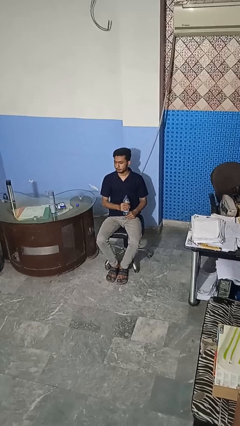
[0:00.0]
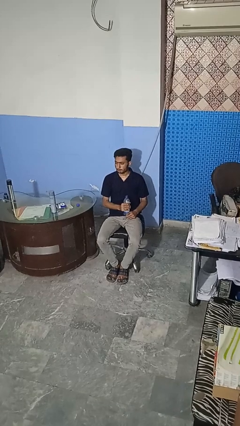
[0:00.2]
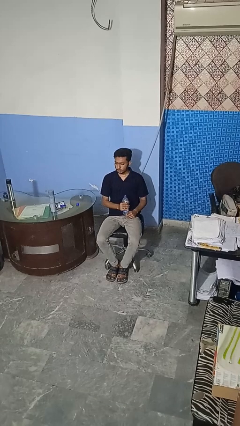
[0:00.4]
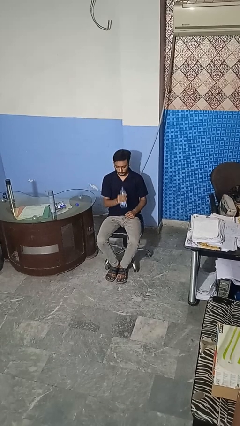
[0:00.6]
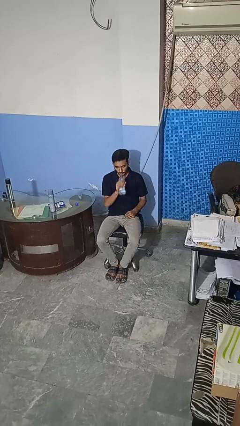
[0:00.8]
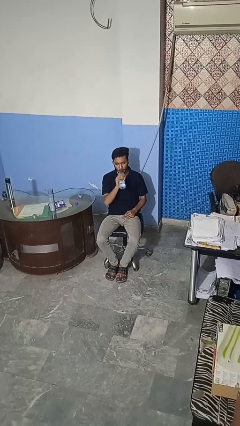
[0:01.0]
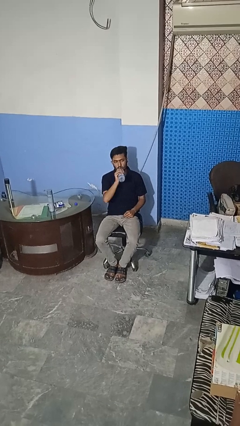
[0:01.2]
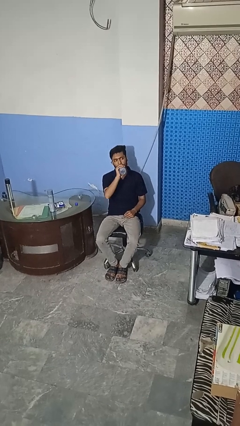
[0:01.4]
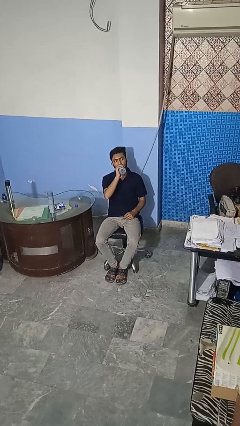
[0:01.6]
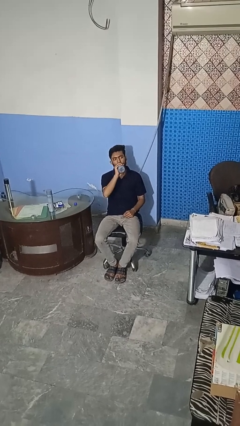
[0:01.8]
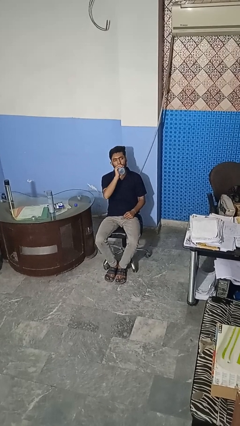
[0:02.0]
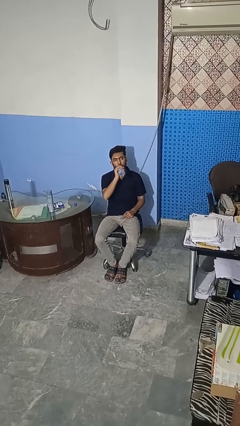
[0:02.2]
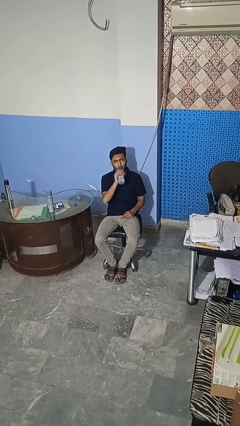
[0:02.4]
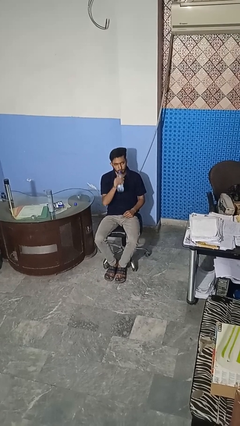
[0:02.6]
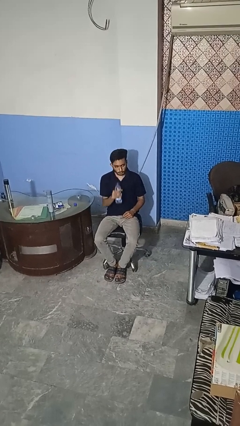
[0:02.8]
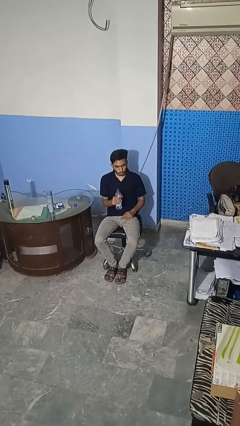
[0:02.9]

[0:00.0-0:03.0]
person drinks from bottle

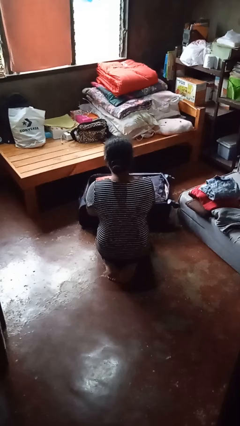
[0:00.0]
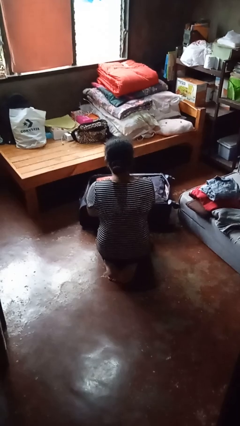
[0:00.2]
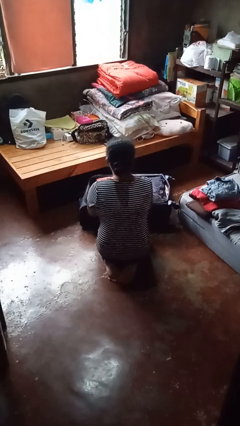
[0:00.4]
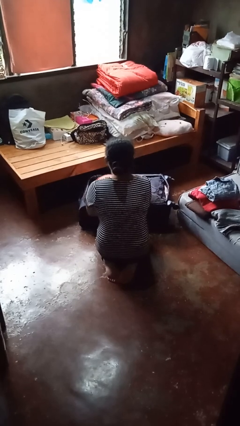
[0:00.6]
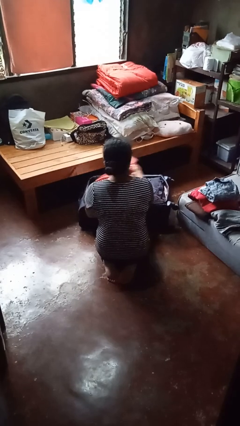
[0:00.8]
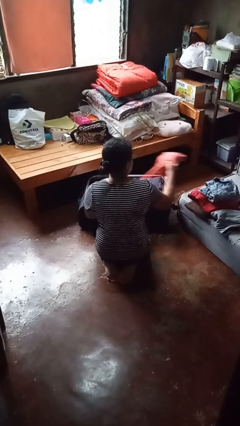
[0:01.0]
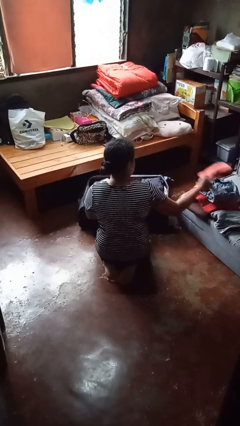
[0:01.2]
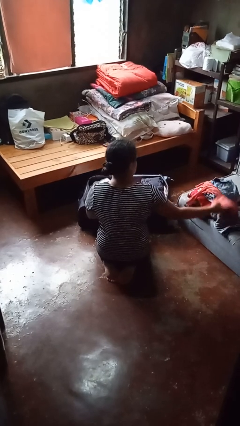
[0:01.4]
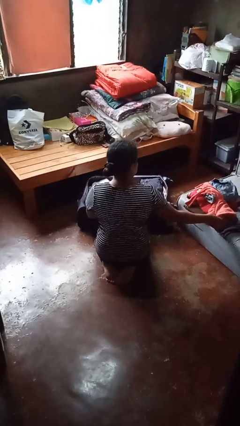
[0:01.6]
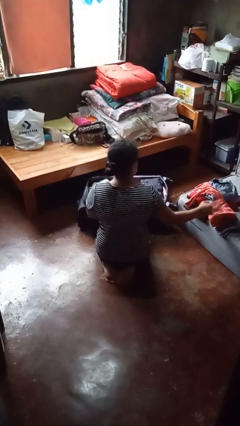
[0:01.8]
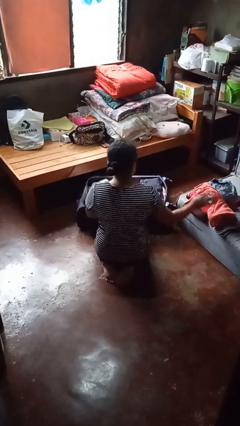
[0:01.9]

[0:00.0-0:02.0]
person unloads clothes from suitcase

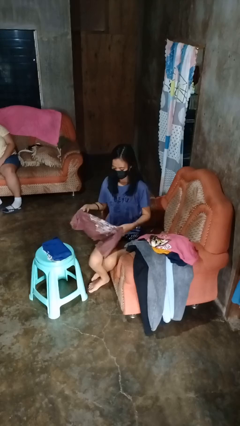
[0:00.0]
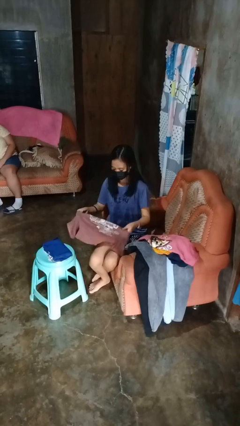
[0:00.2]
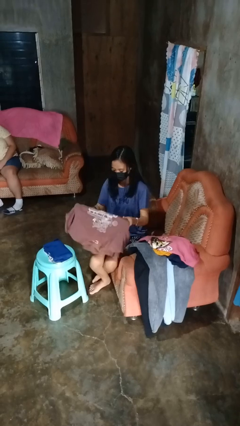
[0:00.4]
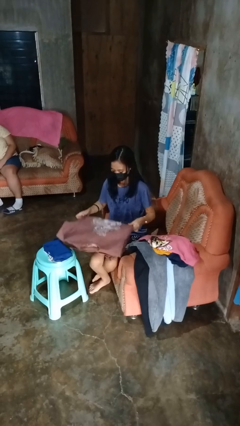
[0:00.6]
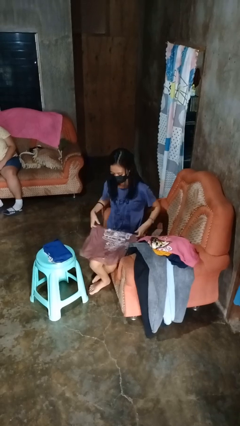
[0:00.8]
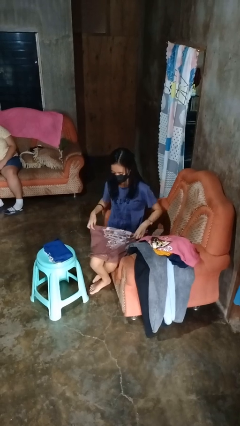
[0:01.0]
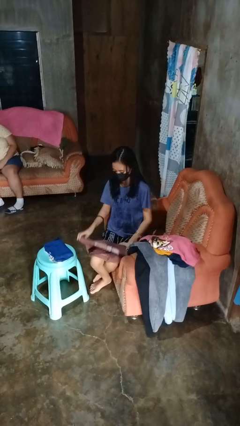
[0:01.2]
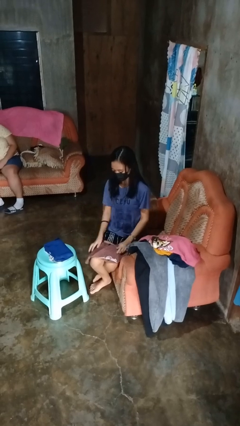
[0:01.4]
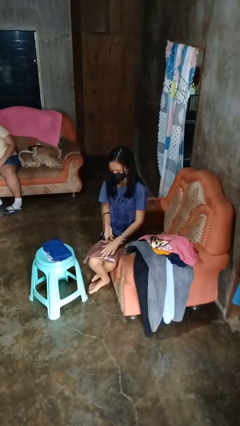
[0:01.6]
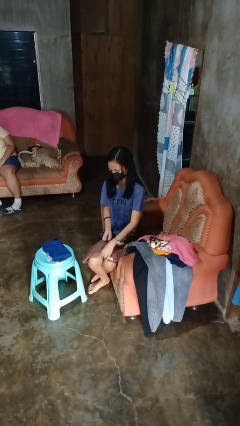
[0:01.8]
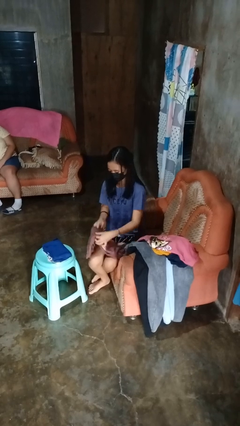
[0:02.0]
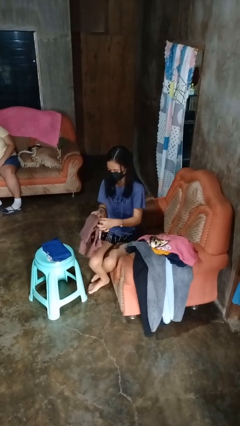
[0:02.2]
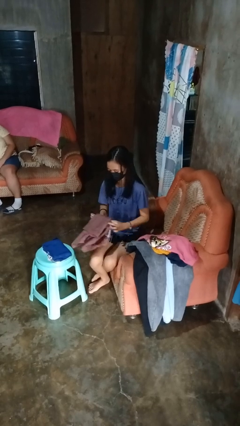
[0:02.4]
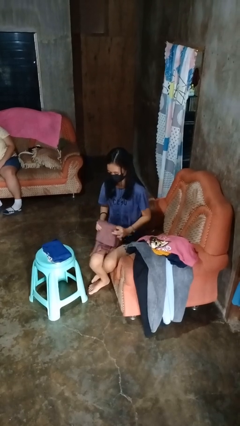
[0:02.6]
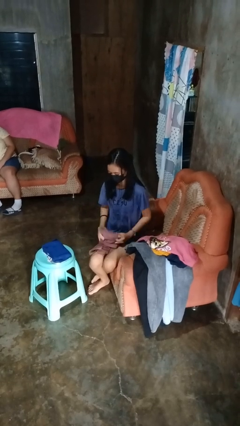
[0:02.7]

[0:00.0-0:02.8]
person folds shirt

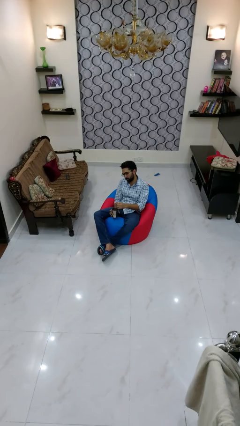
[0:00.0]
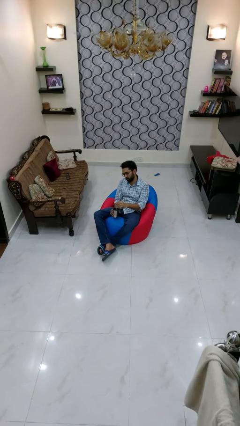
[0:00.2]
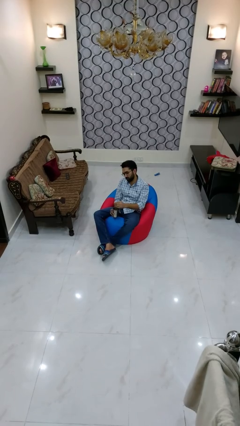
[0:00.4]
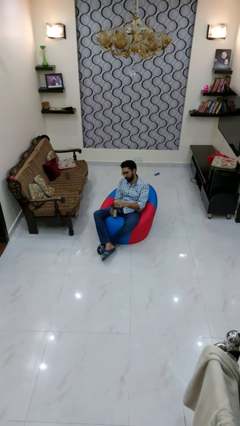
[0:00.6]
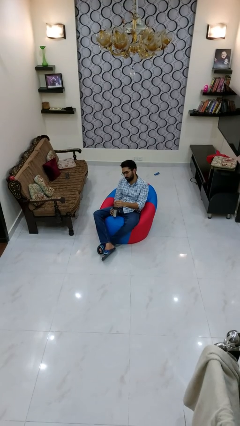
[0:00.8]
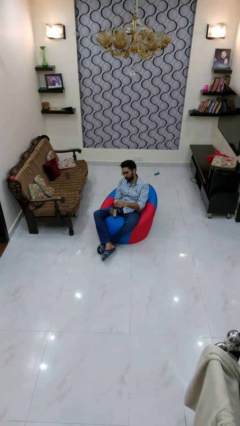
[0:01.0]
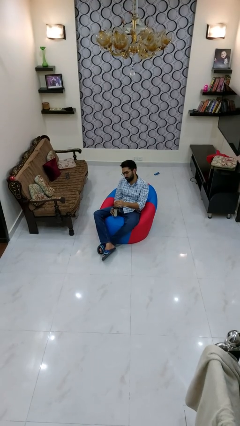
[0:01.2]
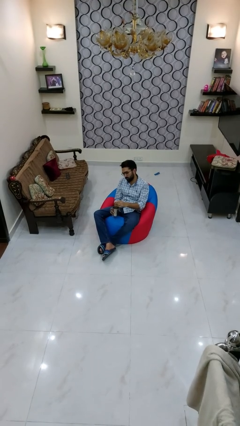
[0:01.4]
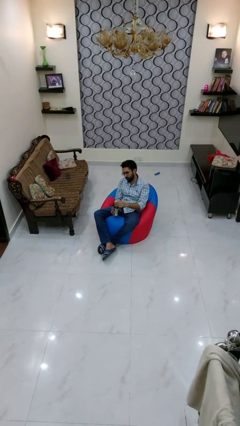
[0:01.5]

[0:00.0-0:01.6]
person stirs mug

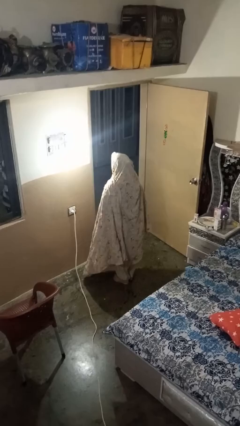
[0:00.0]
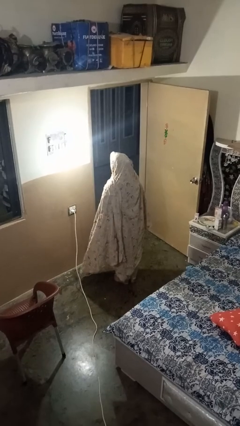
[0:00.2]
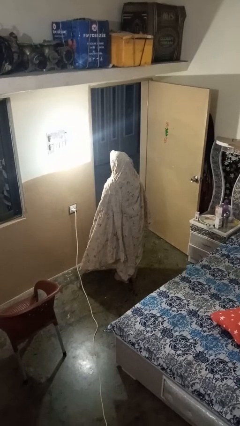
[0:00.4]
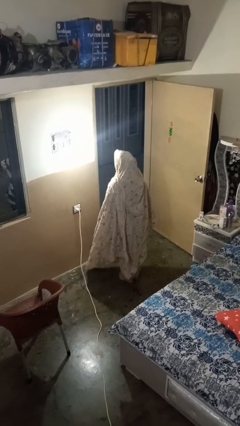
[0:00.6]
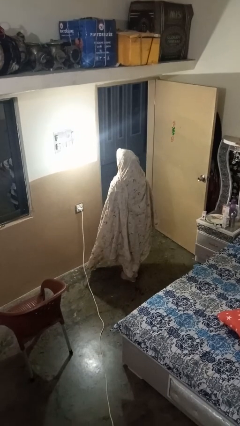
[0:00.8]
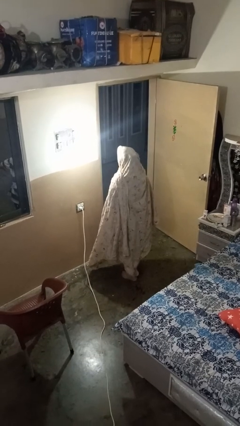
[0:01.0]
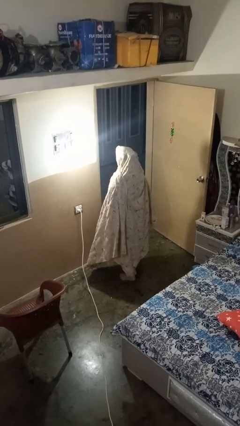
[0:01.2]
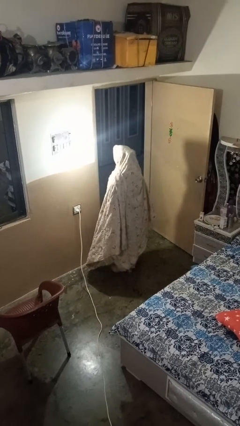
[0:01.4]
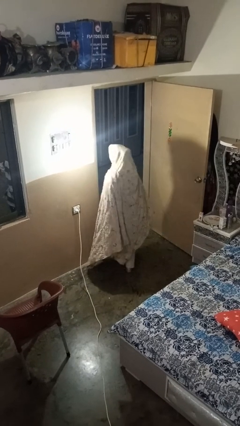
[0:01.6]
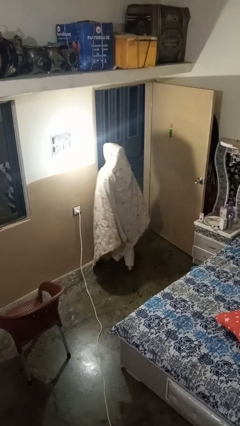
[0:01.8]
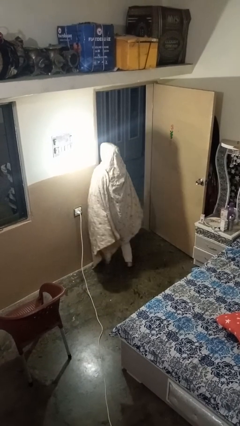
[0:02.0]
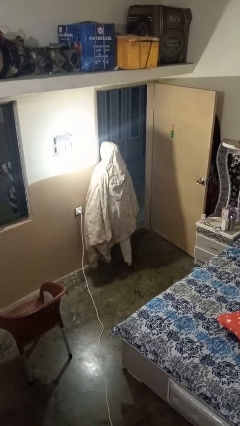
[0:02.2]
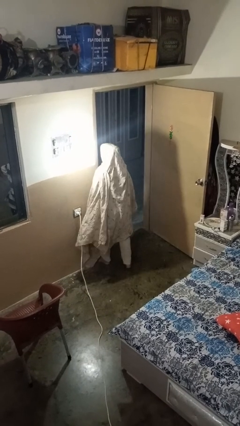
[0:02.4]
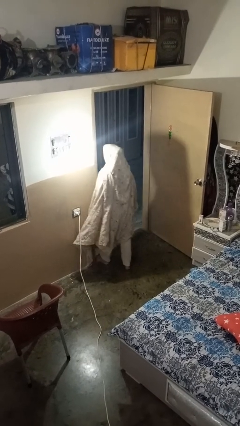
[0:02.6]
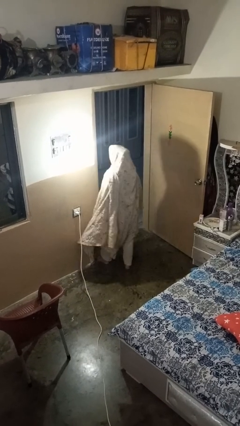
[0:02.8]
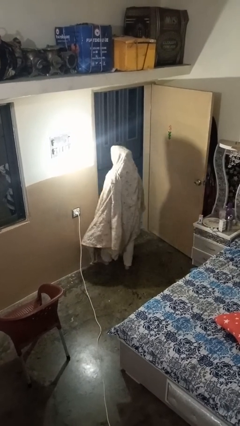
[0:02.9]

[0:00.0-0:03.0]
person bumps into wall

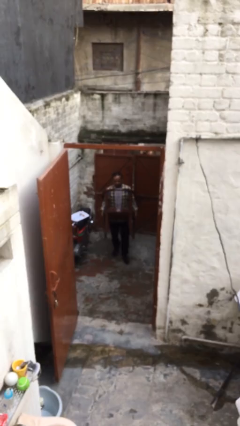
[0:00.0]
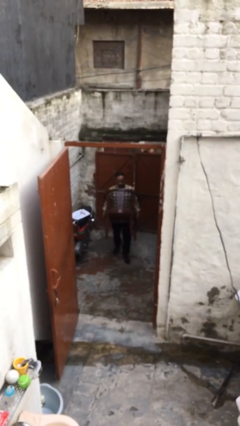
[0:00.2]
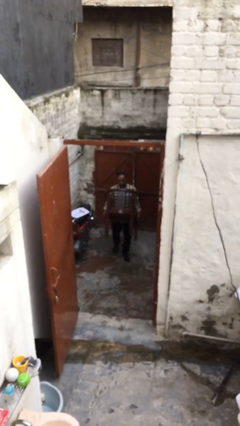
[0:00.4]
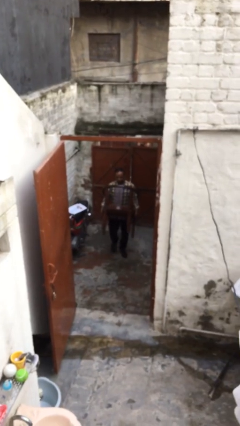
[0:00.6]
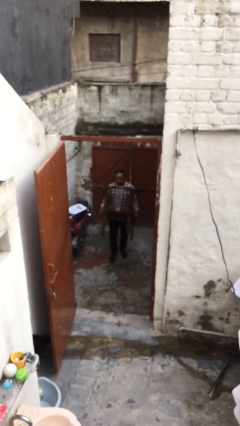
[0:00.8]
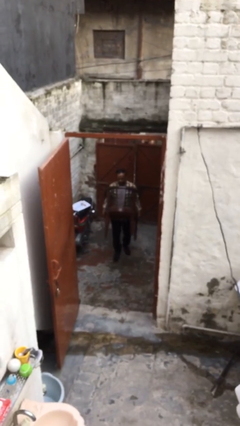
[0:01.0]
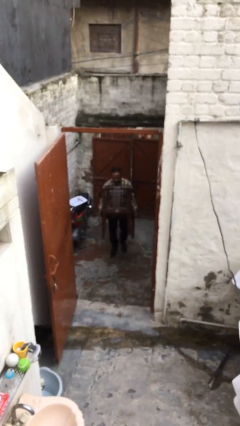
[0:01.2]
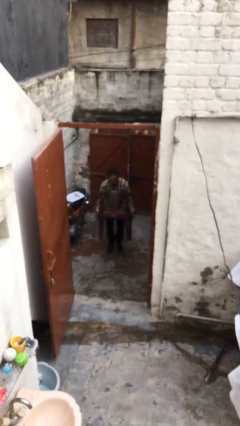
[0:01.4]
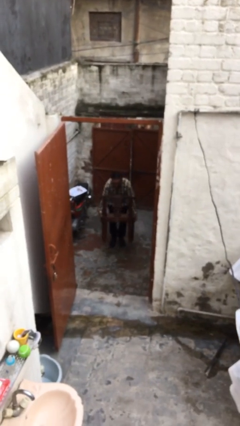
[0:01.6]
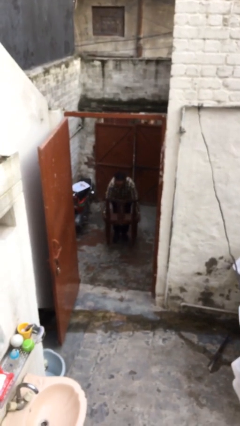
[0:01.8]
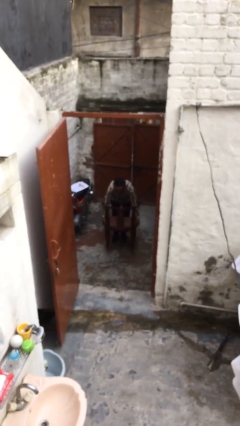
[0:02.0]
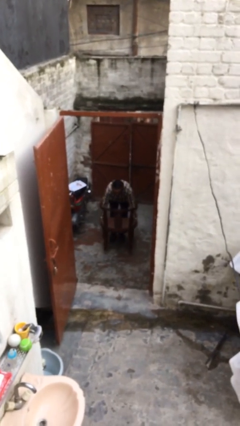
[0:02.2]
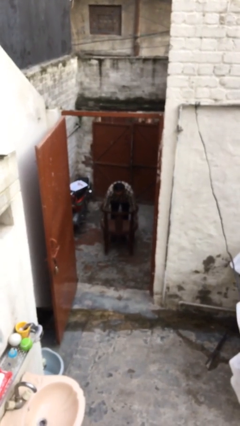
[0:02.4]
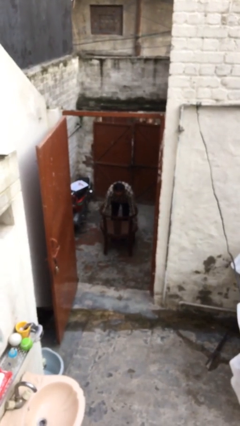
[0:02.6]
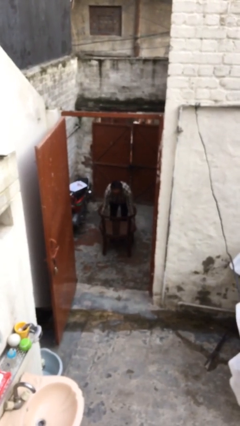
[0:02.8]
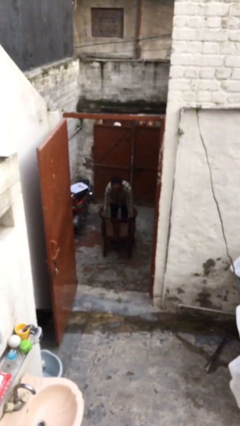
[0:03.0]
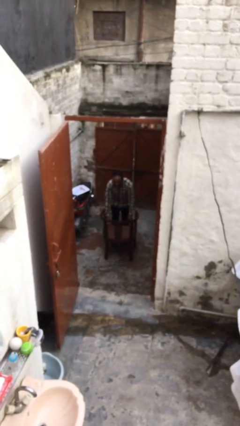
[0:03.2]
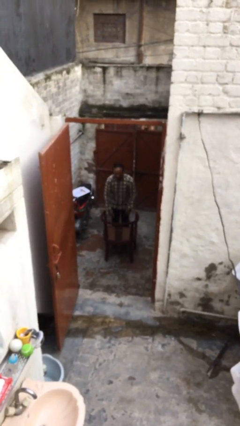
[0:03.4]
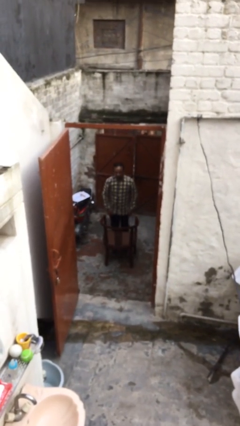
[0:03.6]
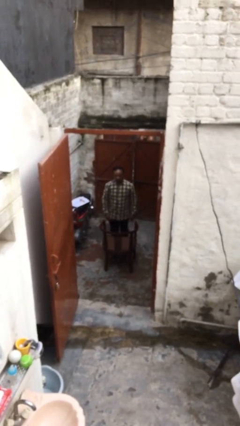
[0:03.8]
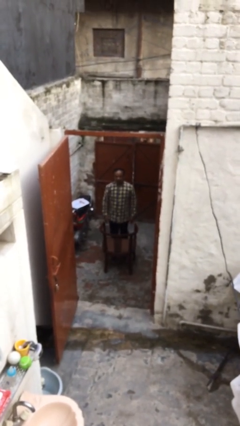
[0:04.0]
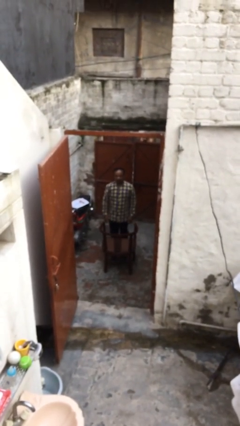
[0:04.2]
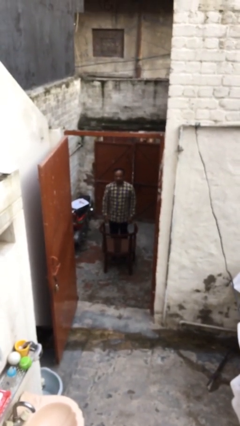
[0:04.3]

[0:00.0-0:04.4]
person puts down object on floor

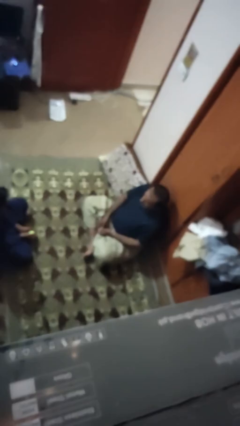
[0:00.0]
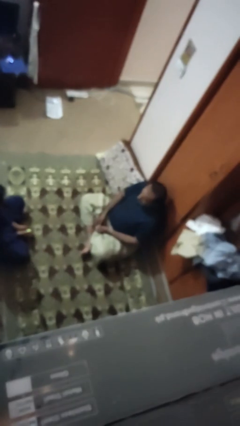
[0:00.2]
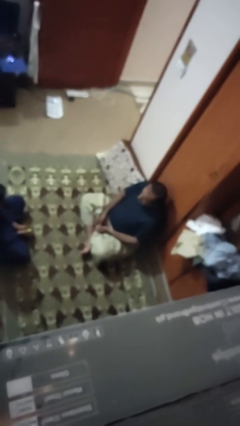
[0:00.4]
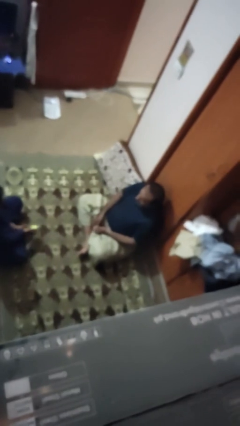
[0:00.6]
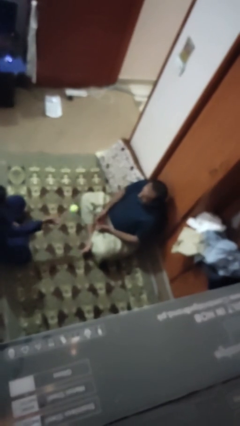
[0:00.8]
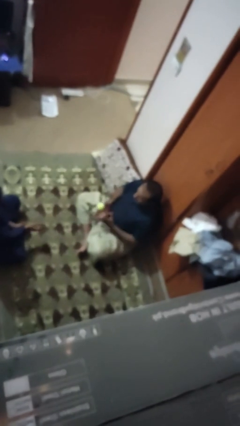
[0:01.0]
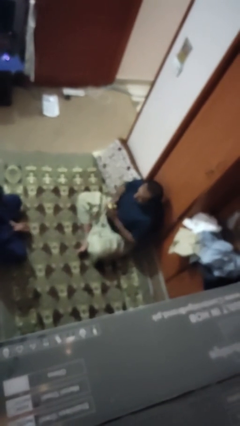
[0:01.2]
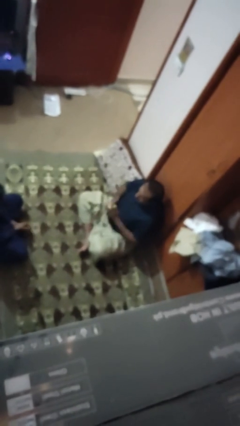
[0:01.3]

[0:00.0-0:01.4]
person catches object from person
